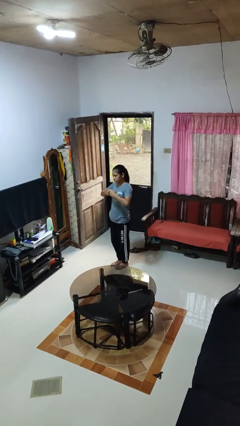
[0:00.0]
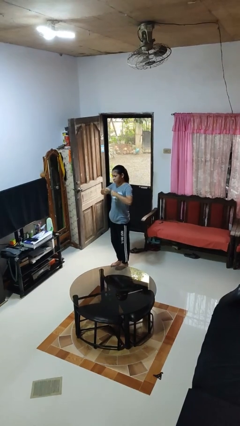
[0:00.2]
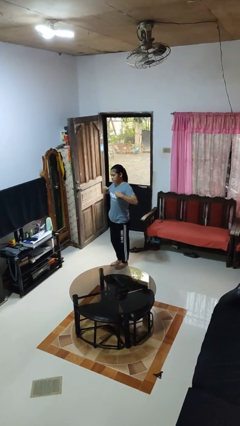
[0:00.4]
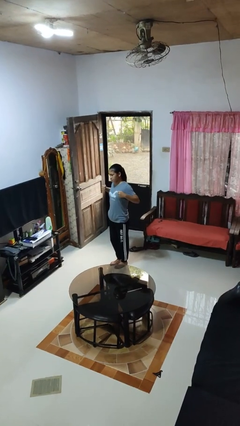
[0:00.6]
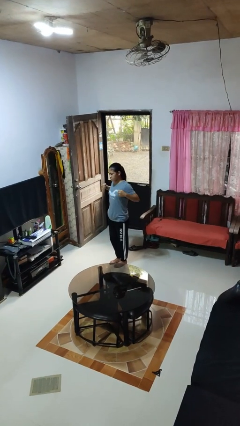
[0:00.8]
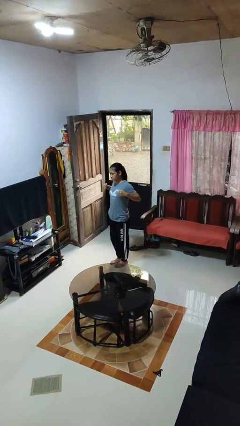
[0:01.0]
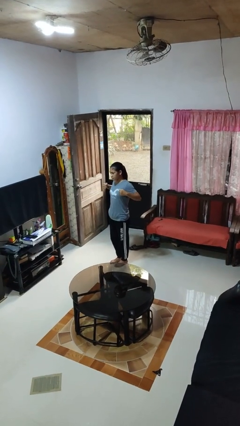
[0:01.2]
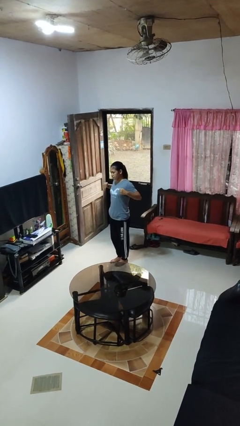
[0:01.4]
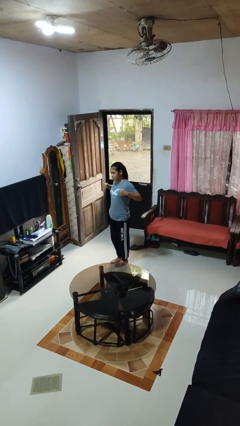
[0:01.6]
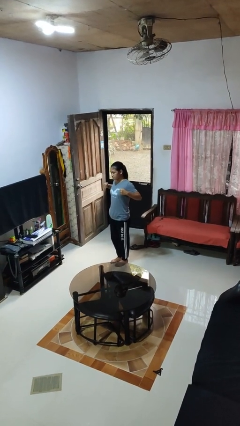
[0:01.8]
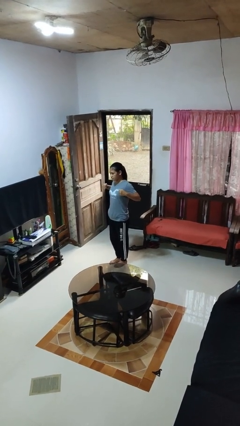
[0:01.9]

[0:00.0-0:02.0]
person gestures zoom in

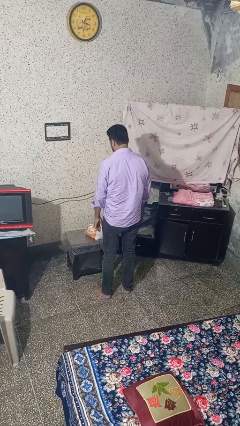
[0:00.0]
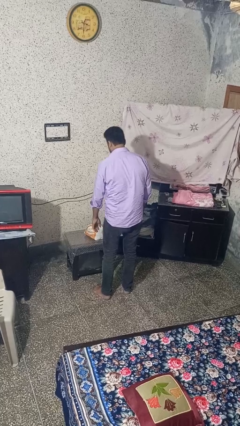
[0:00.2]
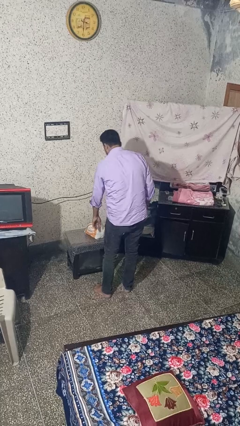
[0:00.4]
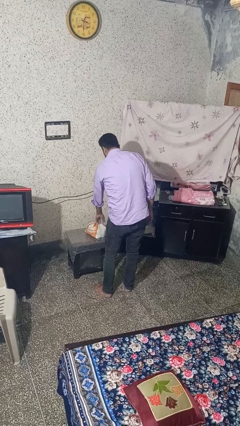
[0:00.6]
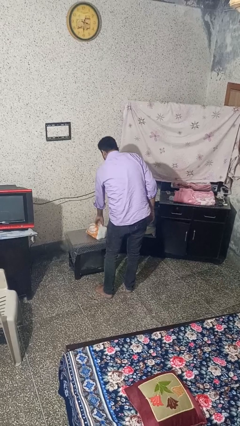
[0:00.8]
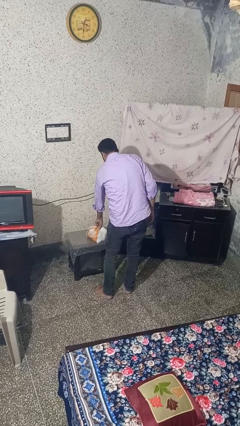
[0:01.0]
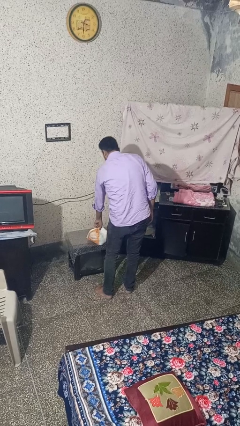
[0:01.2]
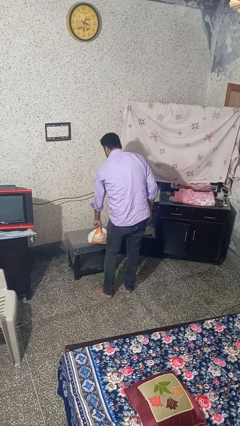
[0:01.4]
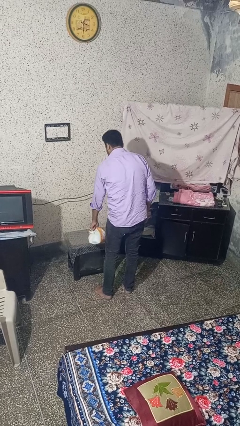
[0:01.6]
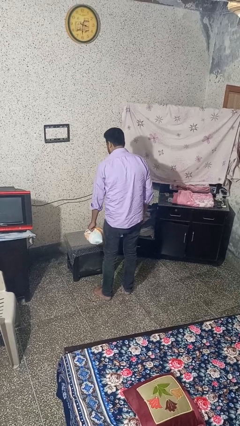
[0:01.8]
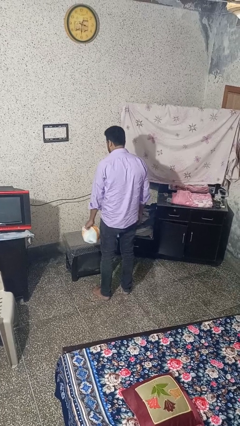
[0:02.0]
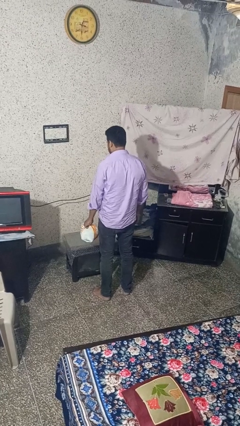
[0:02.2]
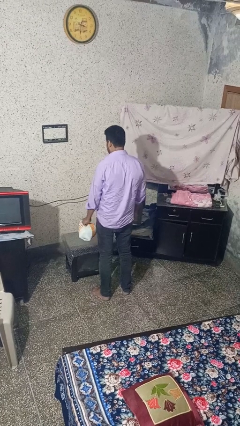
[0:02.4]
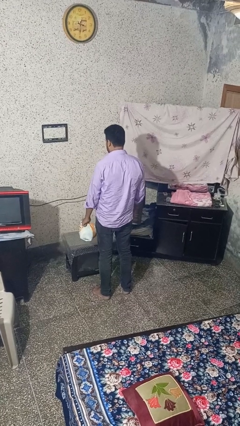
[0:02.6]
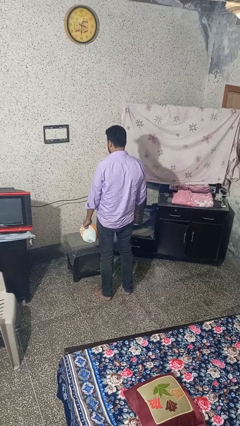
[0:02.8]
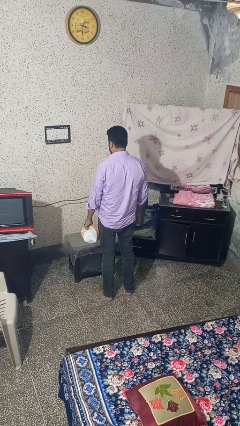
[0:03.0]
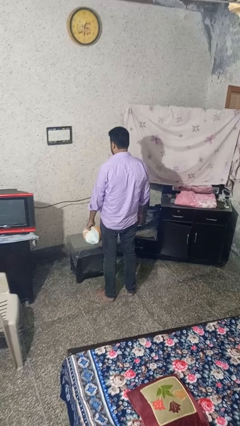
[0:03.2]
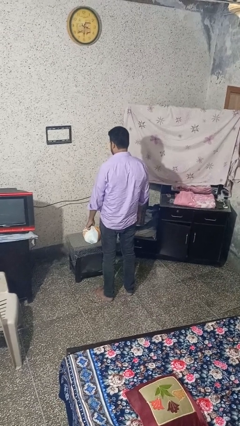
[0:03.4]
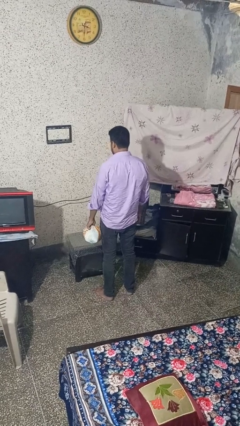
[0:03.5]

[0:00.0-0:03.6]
person picks up object from table

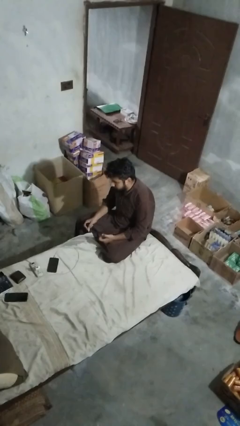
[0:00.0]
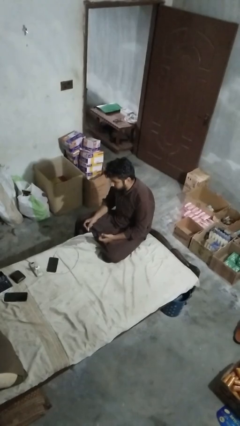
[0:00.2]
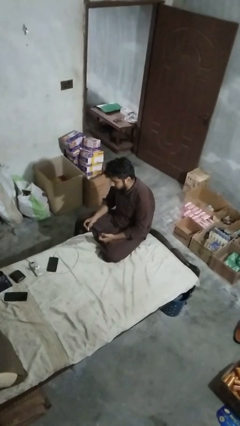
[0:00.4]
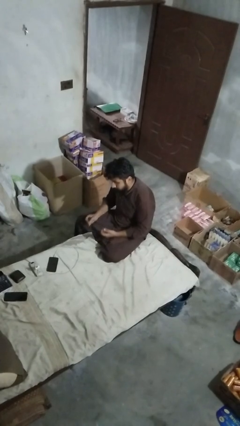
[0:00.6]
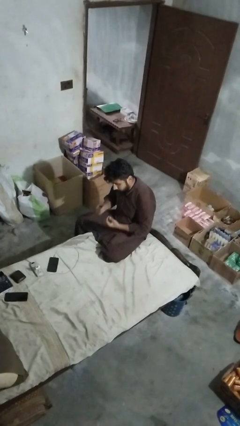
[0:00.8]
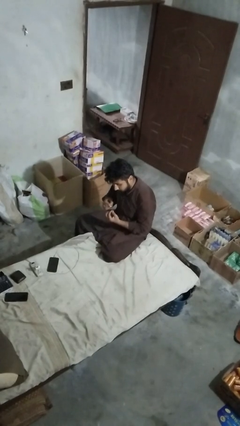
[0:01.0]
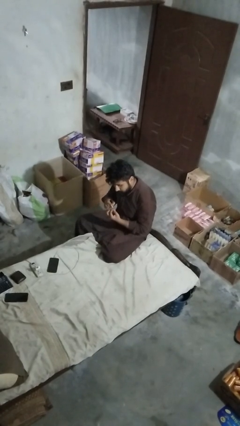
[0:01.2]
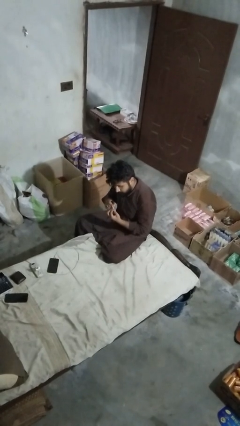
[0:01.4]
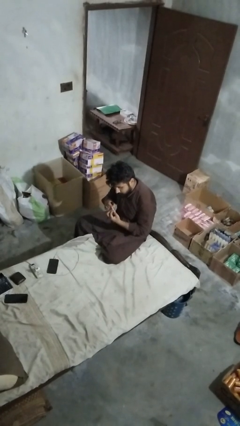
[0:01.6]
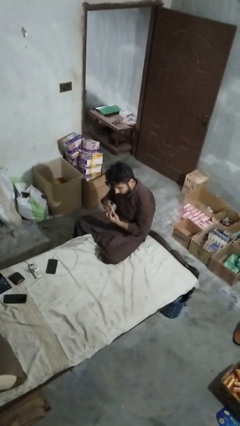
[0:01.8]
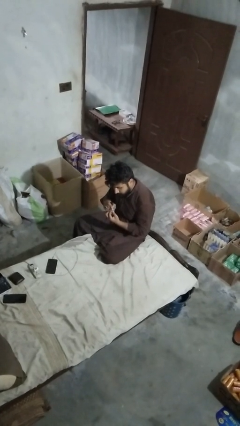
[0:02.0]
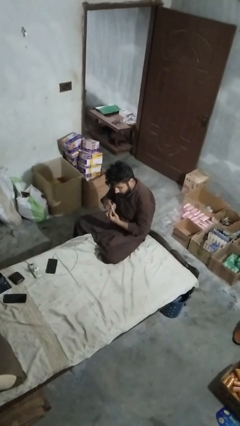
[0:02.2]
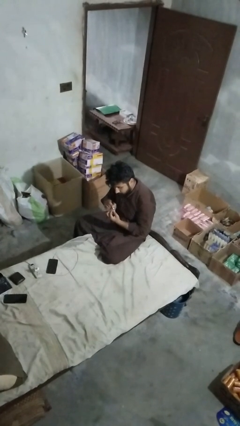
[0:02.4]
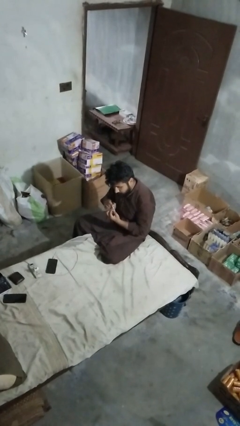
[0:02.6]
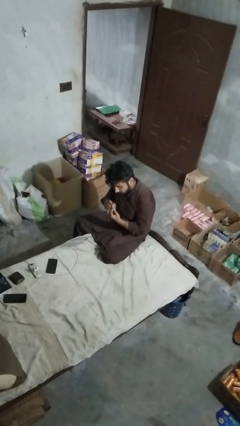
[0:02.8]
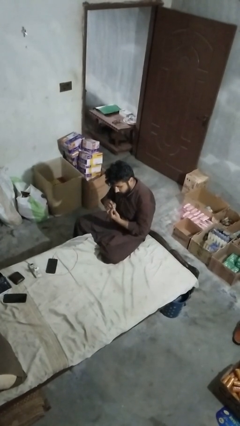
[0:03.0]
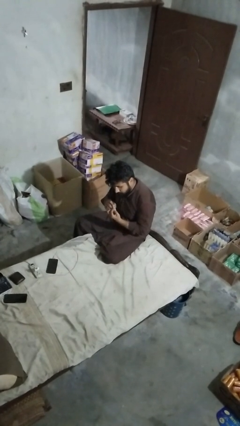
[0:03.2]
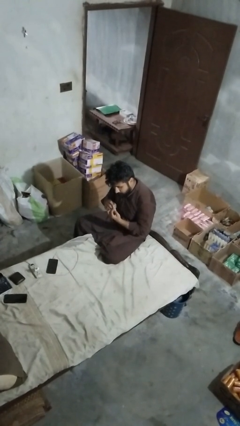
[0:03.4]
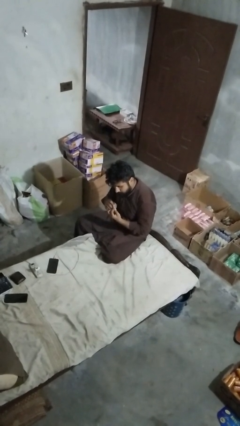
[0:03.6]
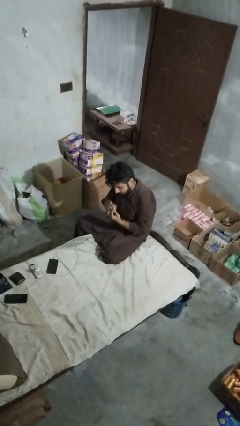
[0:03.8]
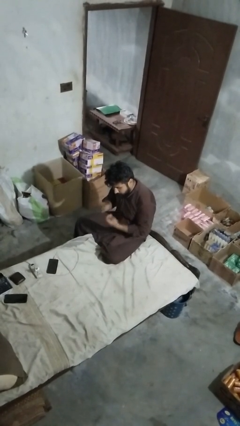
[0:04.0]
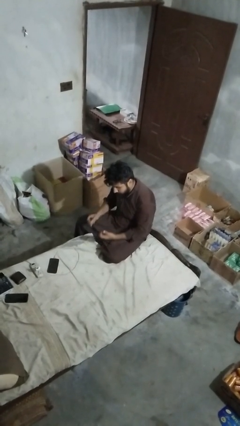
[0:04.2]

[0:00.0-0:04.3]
person paints fingernails

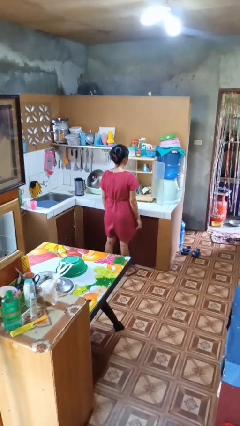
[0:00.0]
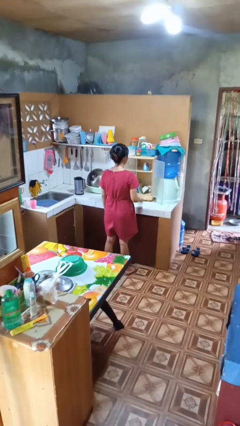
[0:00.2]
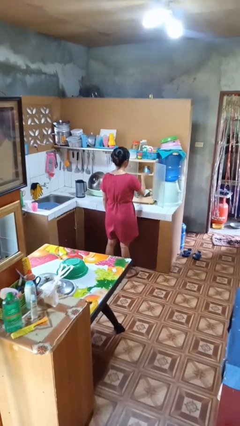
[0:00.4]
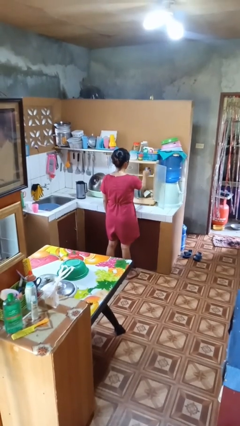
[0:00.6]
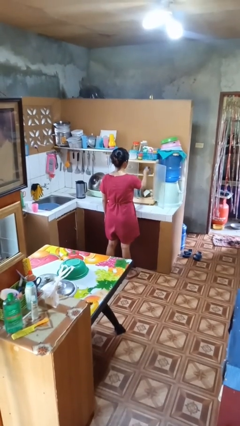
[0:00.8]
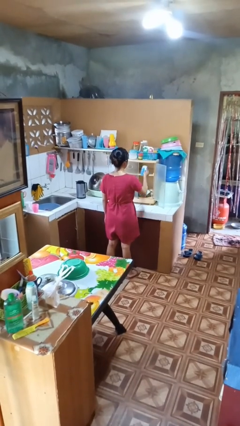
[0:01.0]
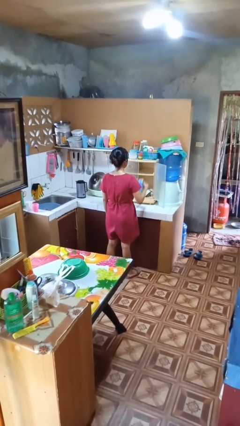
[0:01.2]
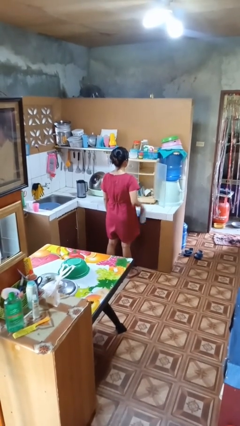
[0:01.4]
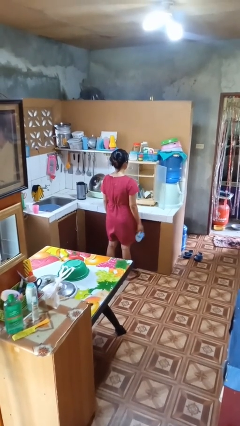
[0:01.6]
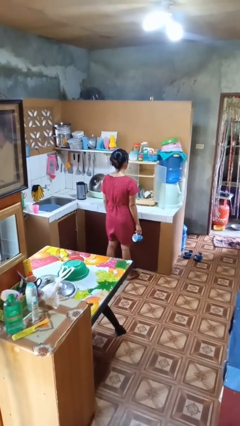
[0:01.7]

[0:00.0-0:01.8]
person takes object from cabinet

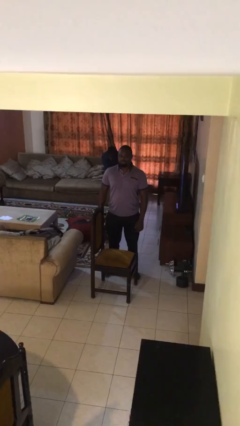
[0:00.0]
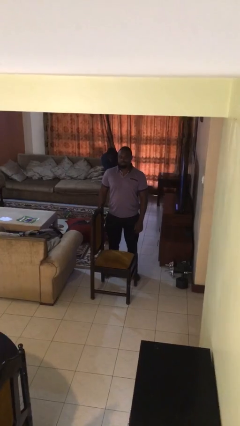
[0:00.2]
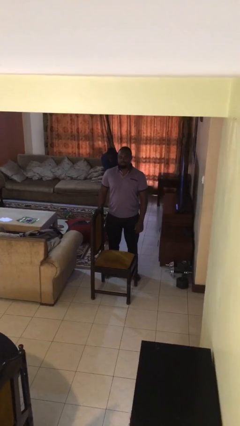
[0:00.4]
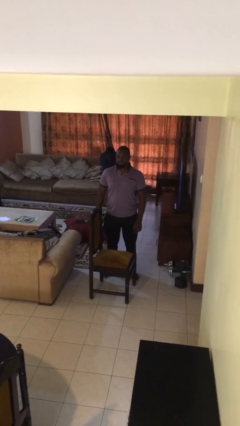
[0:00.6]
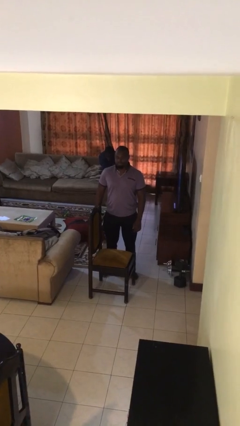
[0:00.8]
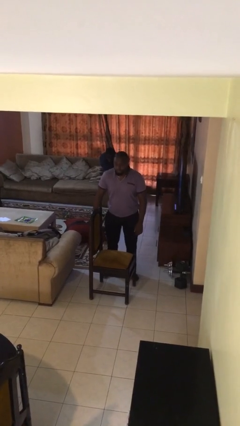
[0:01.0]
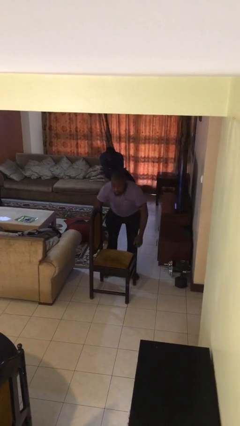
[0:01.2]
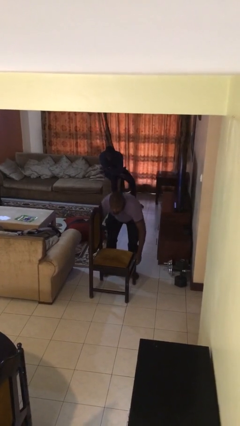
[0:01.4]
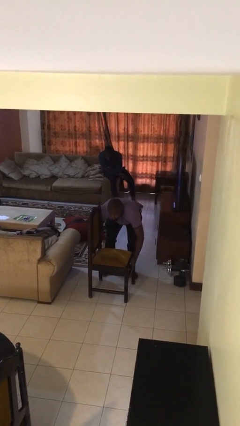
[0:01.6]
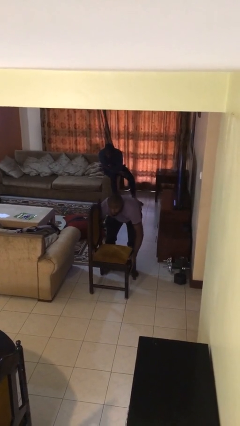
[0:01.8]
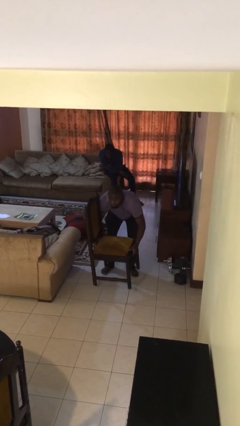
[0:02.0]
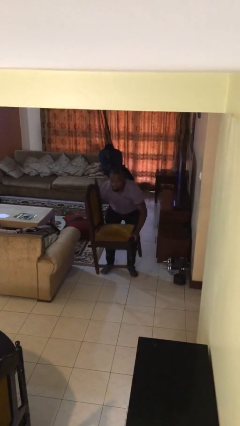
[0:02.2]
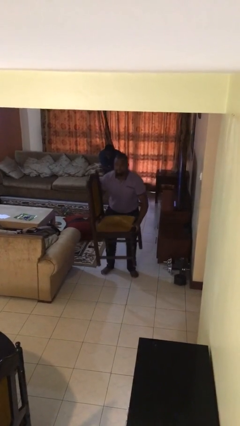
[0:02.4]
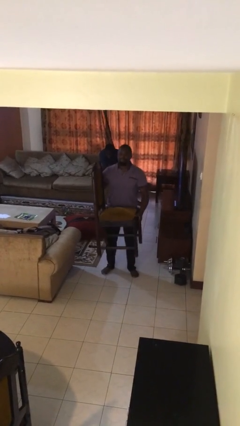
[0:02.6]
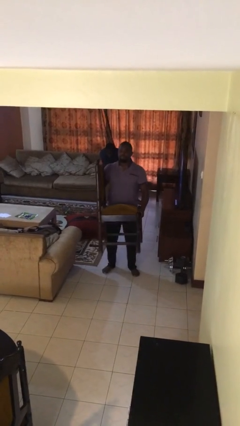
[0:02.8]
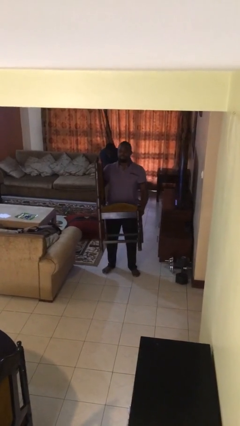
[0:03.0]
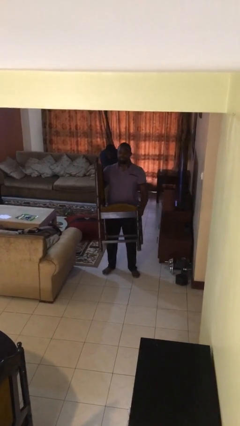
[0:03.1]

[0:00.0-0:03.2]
person picks up object from floor

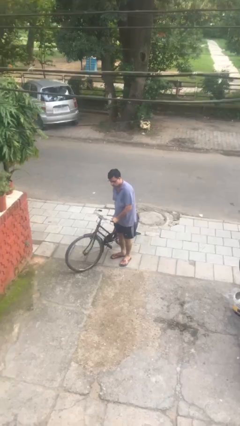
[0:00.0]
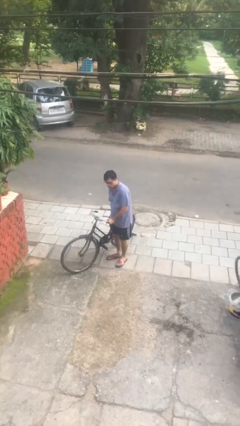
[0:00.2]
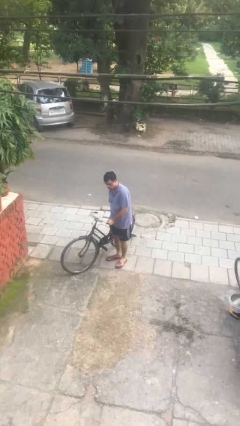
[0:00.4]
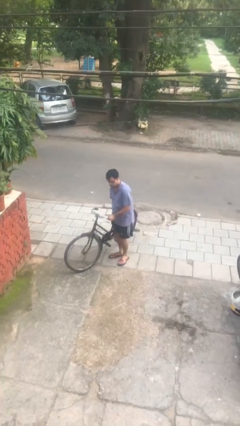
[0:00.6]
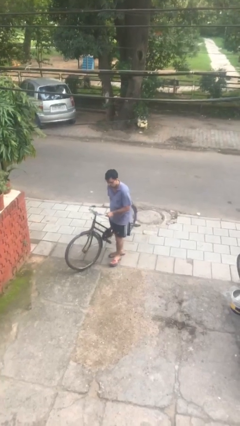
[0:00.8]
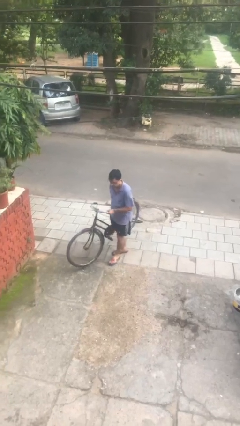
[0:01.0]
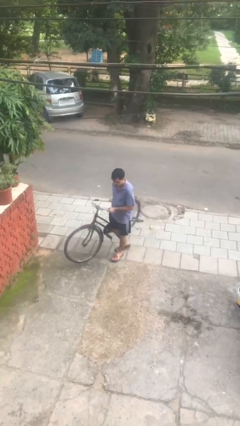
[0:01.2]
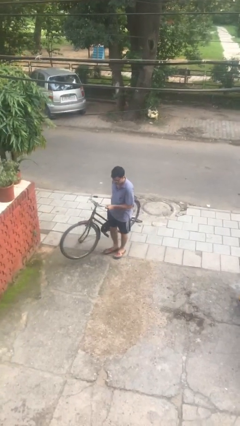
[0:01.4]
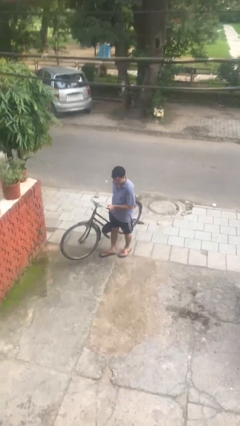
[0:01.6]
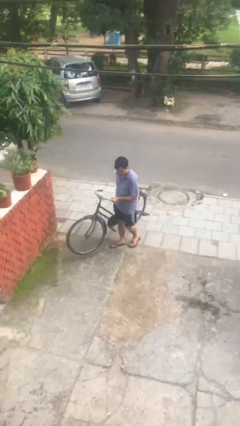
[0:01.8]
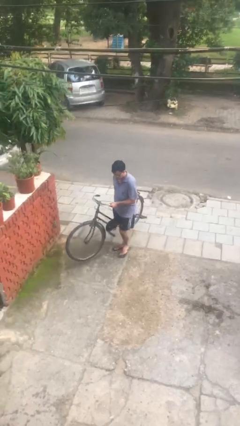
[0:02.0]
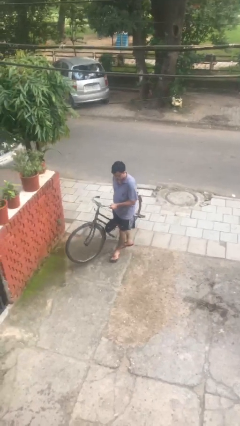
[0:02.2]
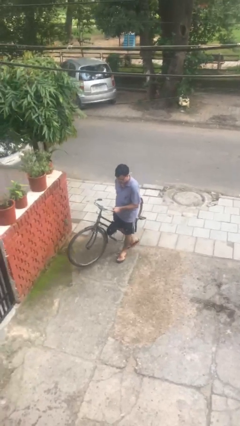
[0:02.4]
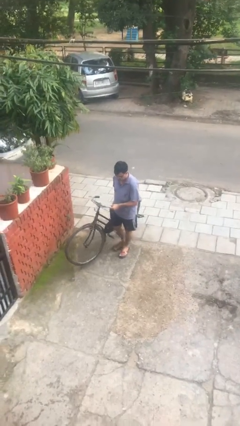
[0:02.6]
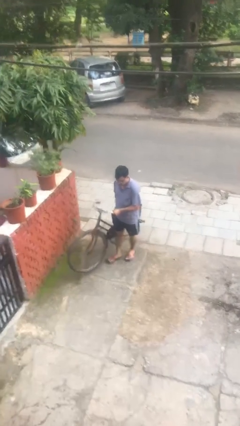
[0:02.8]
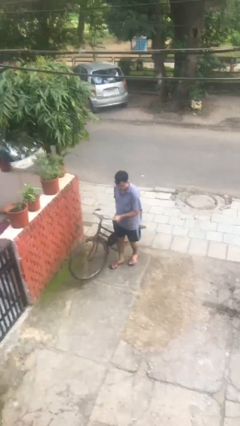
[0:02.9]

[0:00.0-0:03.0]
person carries bicycle
